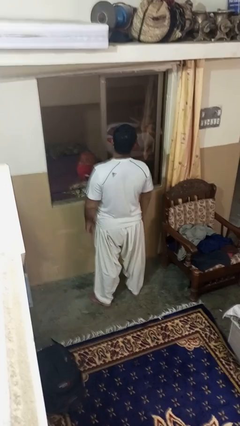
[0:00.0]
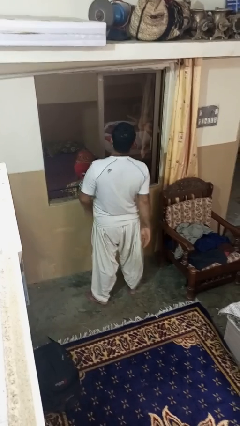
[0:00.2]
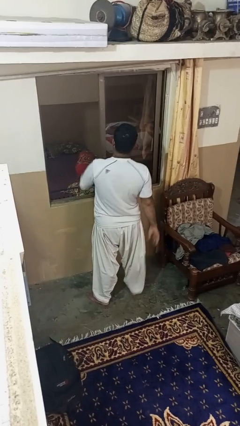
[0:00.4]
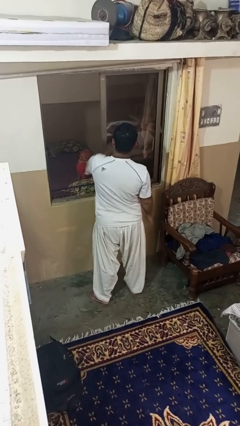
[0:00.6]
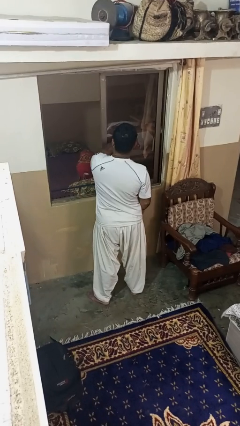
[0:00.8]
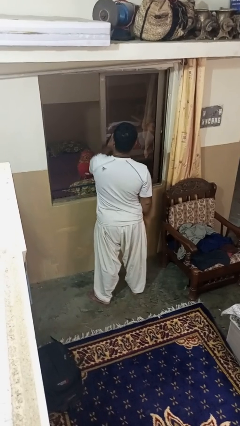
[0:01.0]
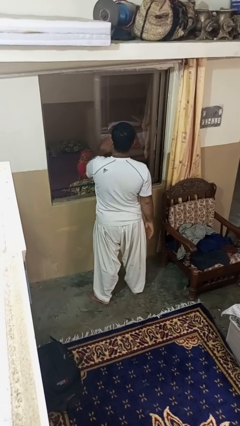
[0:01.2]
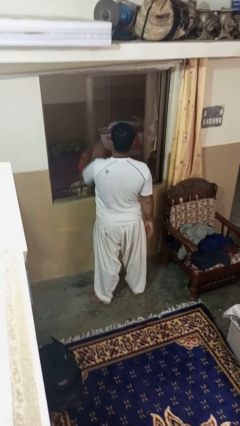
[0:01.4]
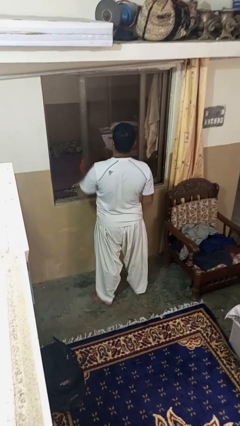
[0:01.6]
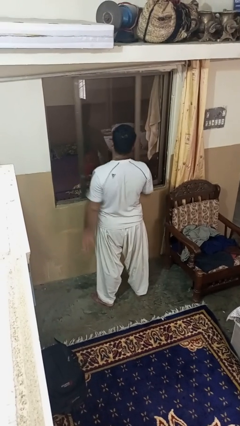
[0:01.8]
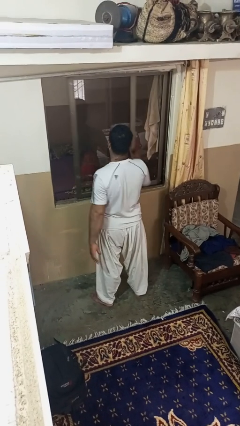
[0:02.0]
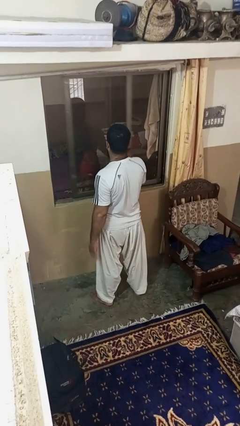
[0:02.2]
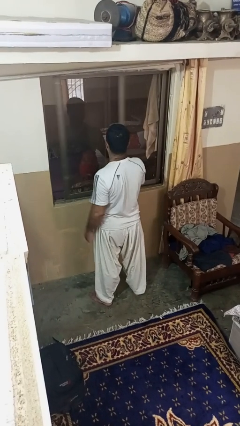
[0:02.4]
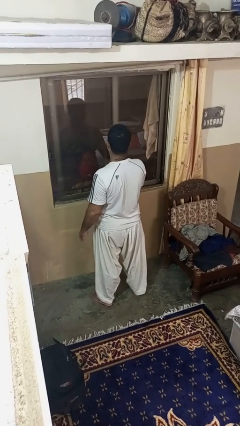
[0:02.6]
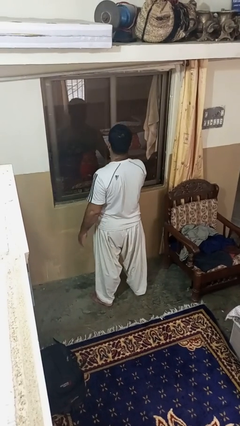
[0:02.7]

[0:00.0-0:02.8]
person closes home window

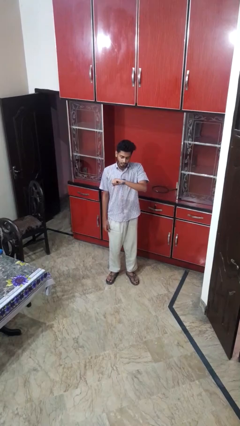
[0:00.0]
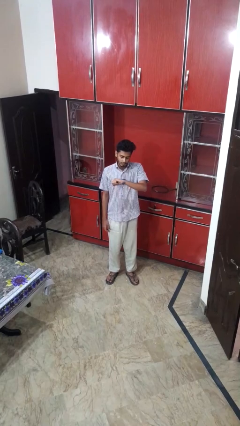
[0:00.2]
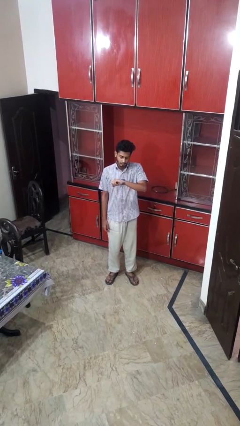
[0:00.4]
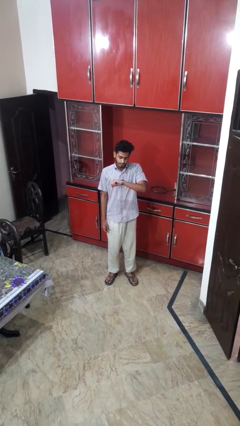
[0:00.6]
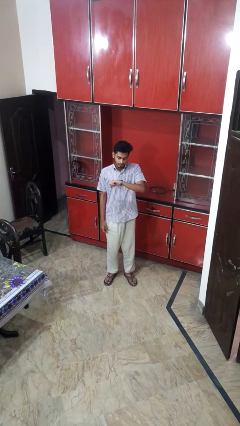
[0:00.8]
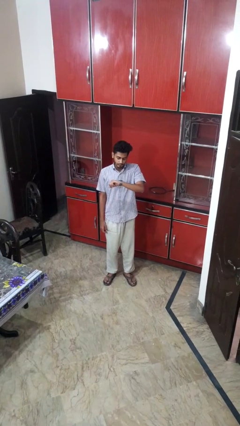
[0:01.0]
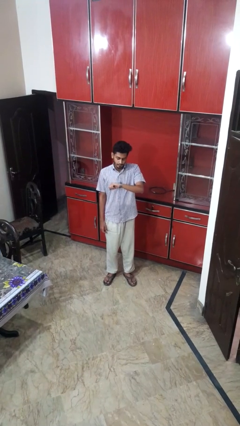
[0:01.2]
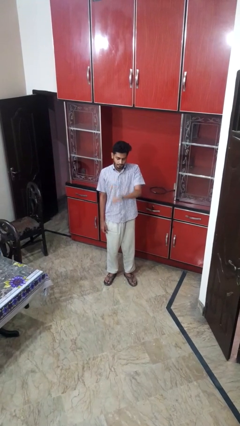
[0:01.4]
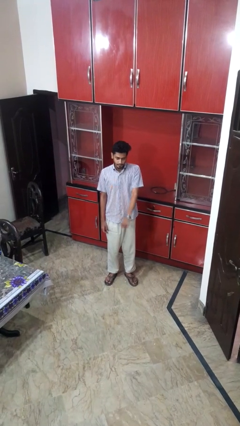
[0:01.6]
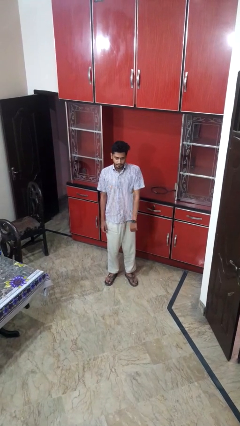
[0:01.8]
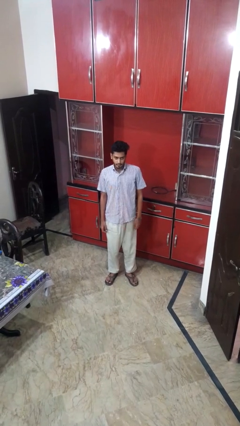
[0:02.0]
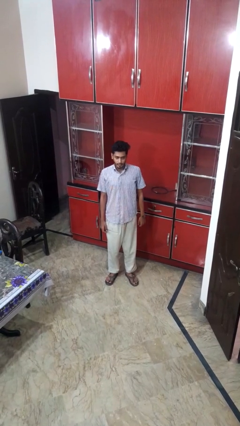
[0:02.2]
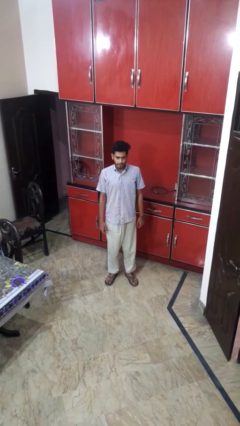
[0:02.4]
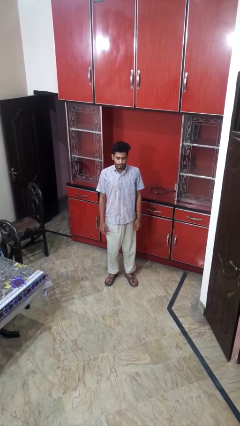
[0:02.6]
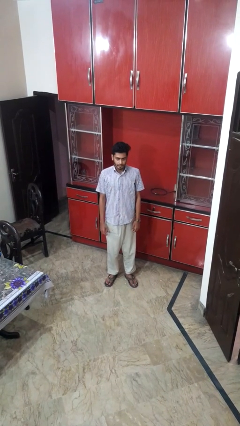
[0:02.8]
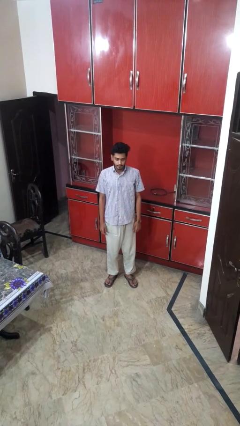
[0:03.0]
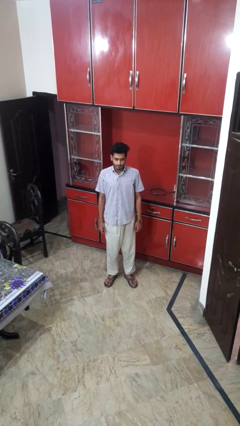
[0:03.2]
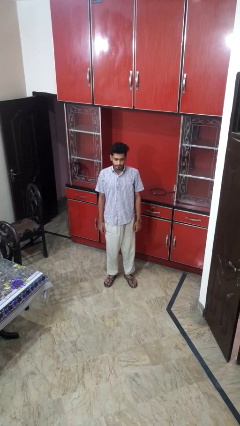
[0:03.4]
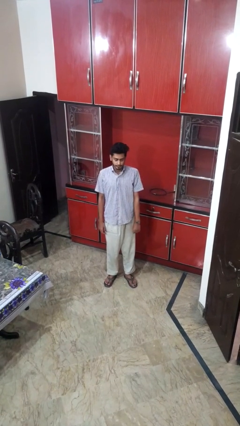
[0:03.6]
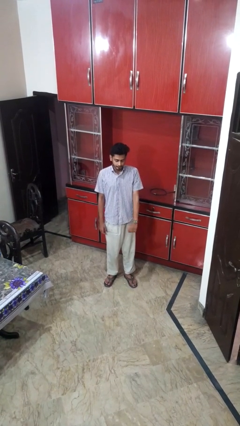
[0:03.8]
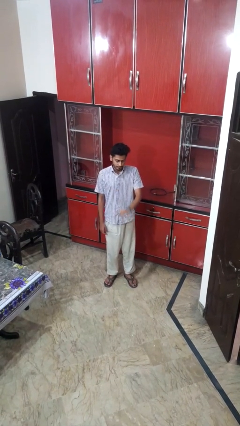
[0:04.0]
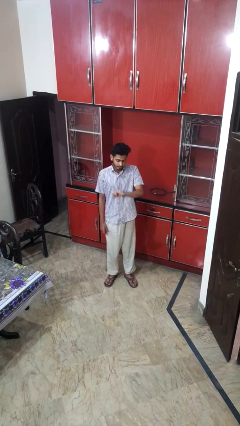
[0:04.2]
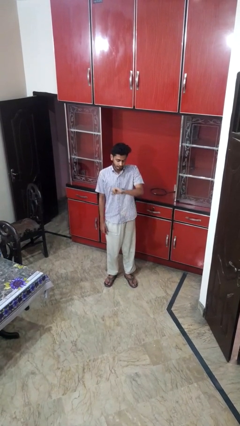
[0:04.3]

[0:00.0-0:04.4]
person sits crisscross

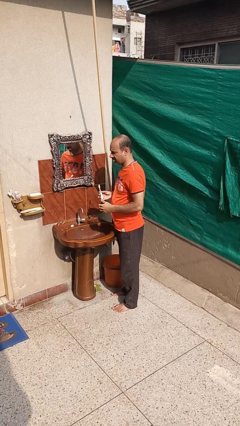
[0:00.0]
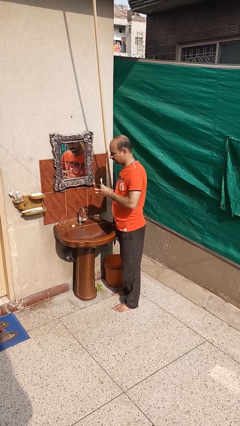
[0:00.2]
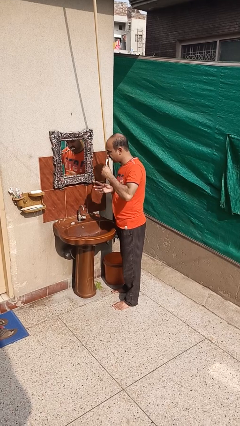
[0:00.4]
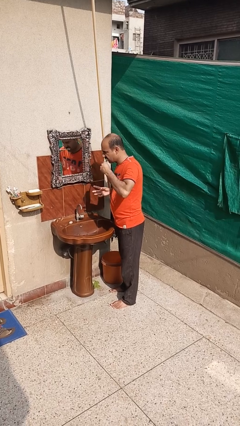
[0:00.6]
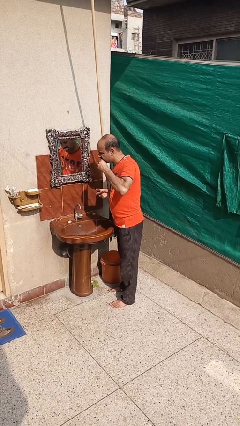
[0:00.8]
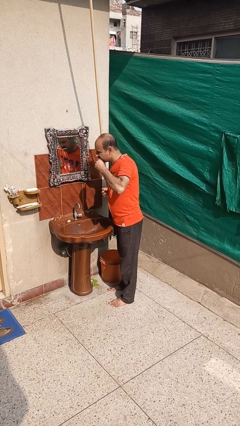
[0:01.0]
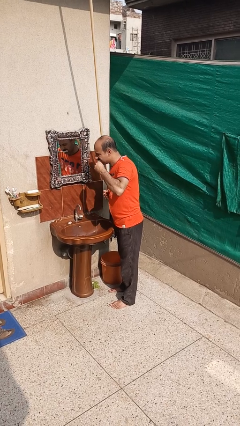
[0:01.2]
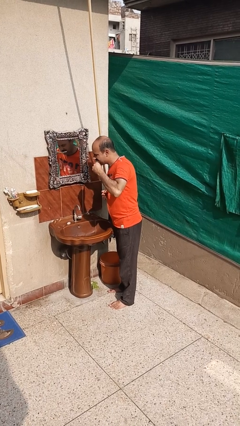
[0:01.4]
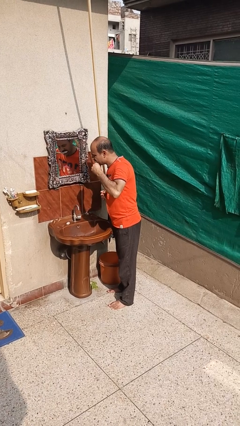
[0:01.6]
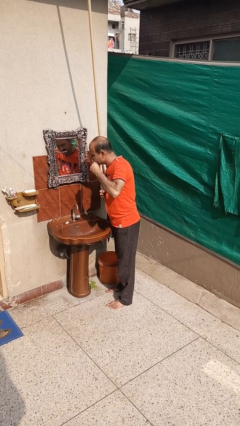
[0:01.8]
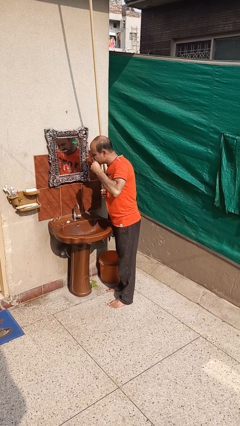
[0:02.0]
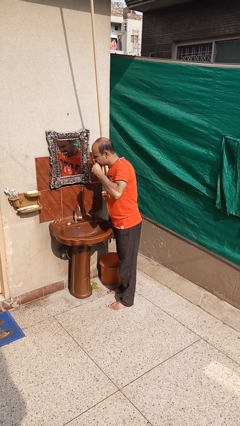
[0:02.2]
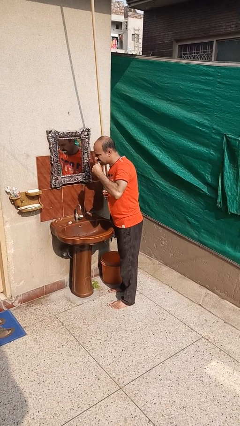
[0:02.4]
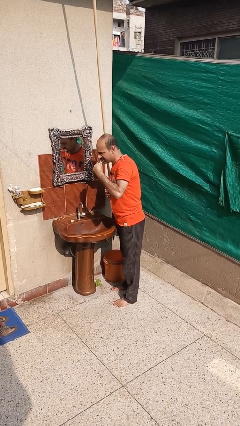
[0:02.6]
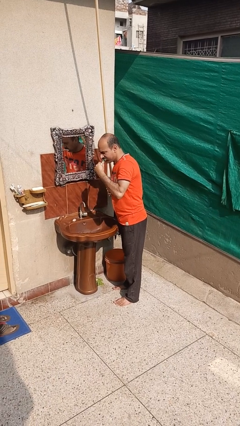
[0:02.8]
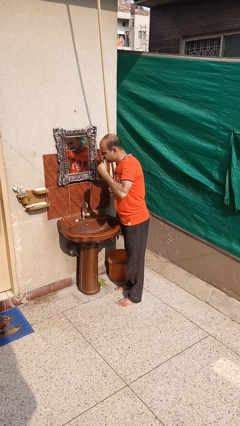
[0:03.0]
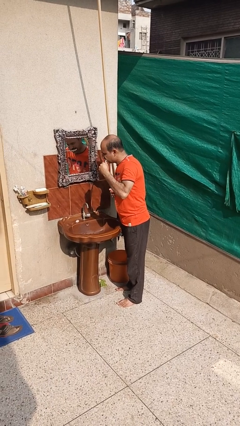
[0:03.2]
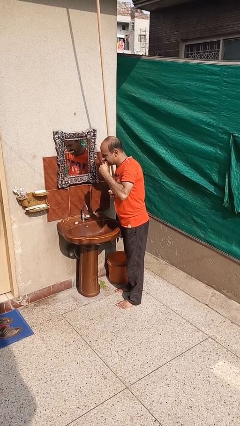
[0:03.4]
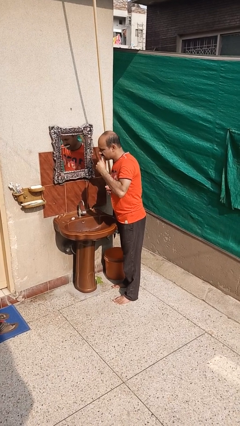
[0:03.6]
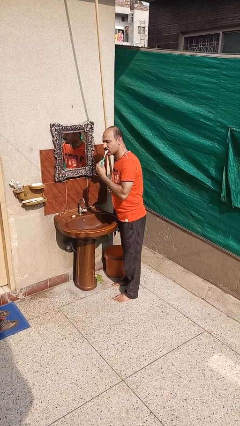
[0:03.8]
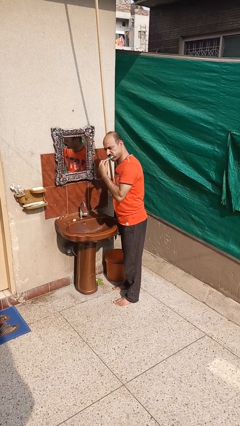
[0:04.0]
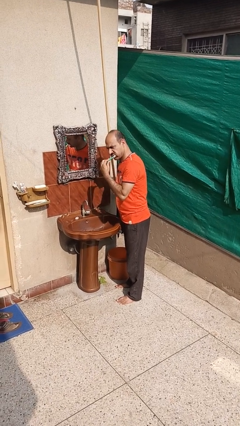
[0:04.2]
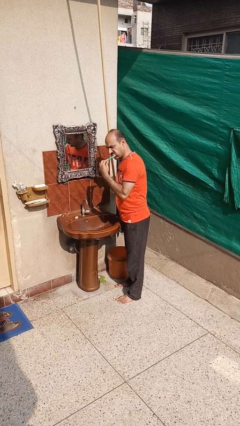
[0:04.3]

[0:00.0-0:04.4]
person brushes teeth

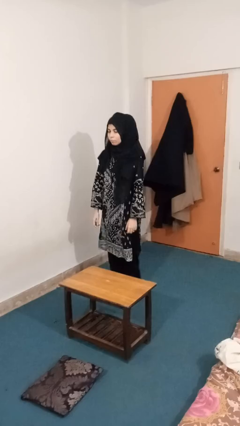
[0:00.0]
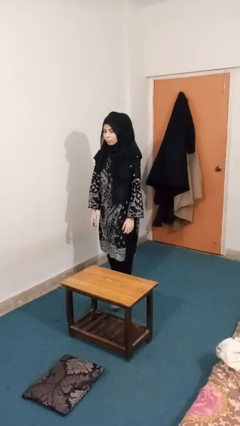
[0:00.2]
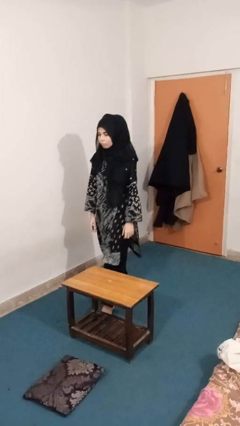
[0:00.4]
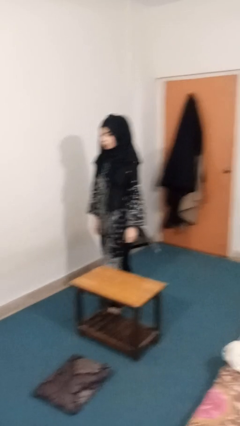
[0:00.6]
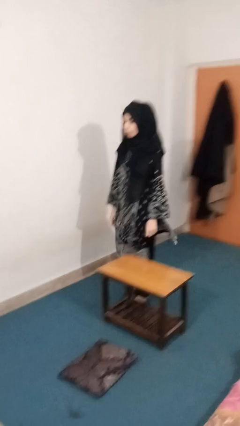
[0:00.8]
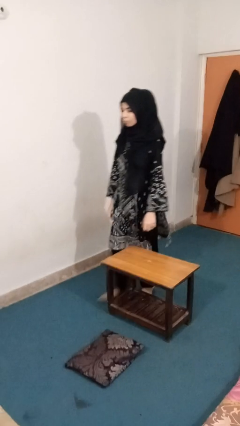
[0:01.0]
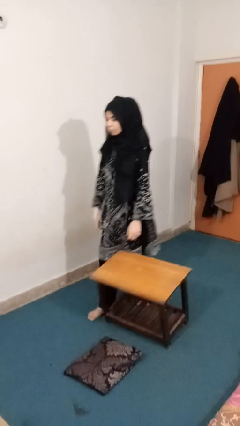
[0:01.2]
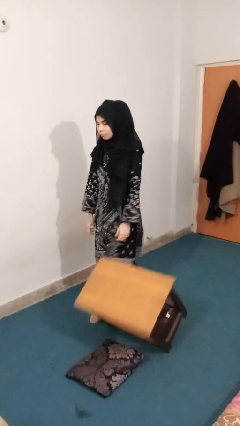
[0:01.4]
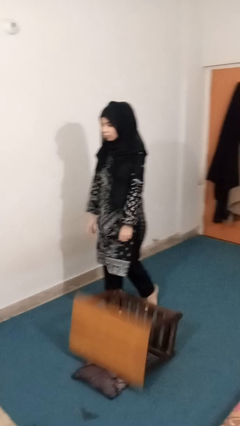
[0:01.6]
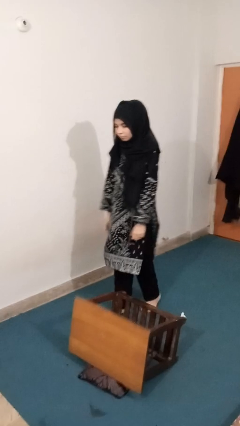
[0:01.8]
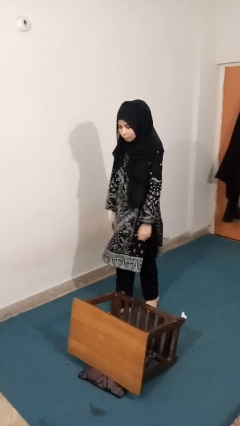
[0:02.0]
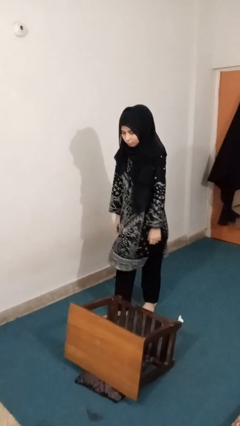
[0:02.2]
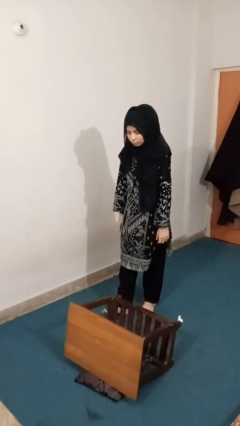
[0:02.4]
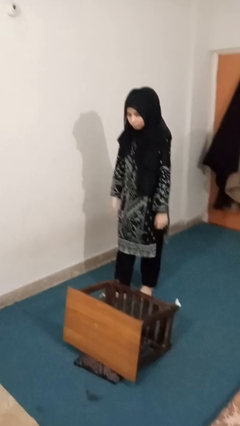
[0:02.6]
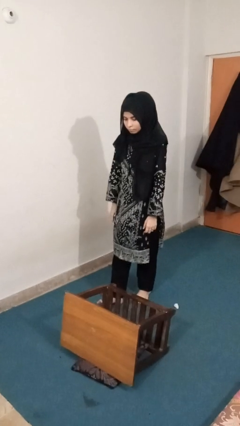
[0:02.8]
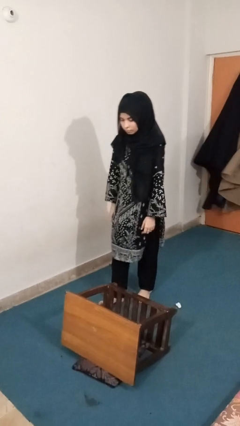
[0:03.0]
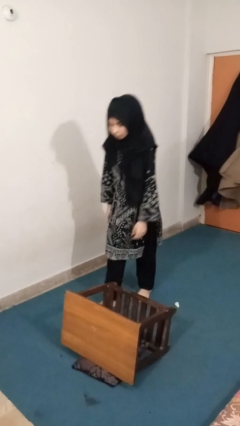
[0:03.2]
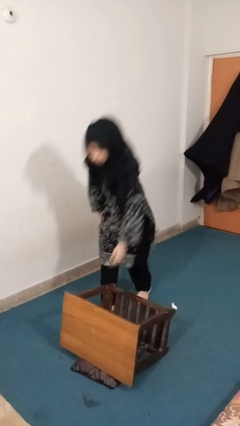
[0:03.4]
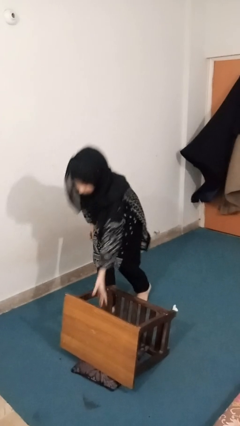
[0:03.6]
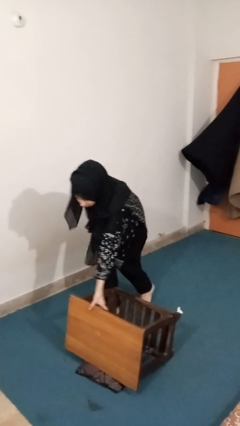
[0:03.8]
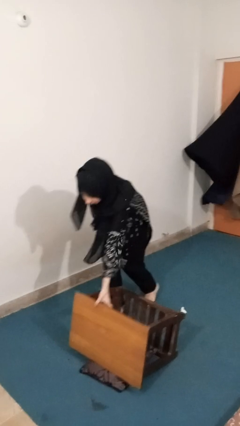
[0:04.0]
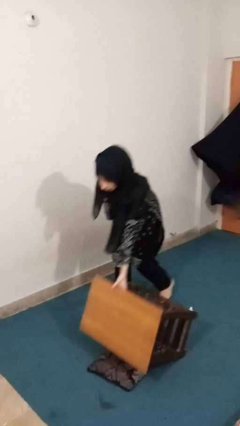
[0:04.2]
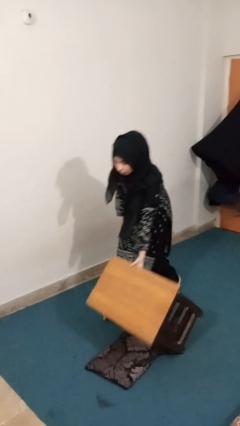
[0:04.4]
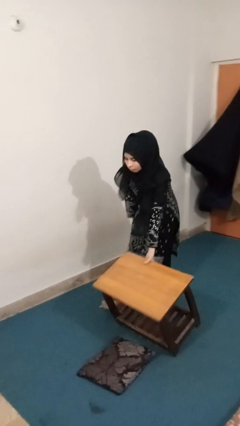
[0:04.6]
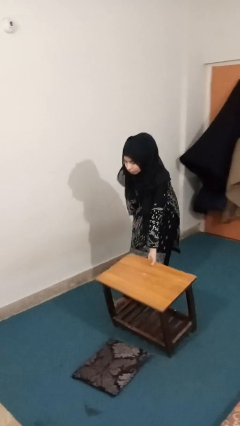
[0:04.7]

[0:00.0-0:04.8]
person knocks over furniture

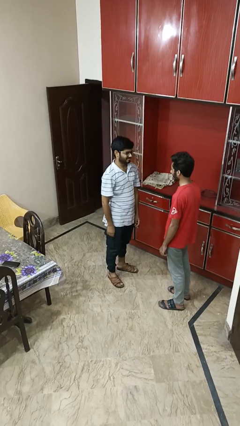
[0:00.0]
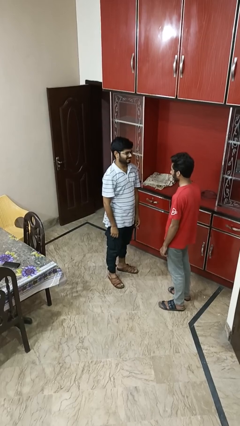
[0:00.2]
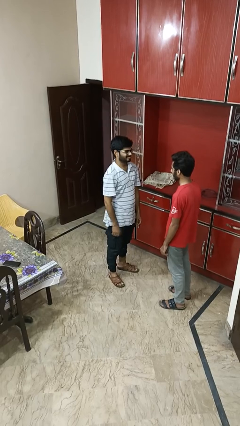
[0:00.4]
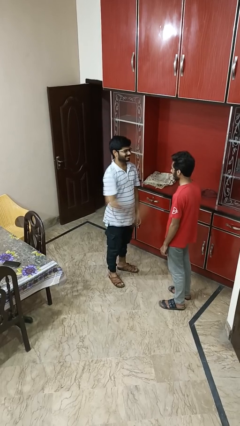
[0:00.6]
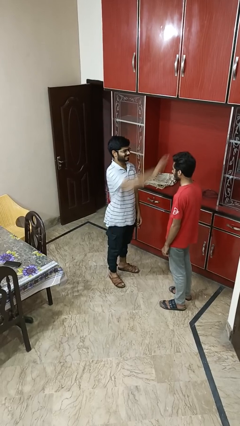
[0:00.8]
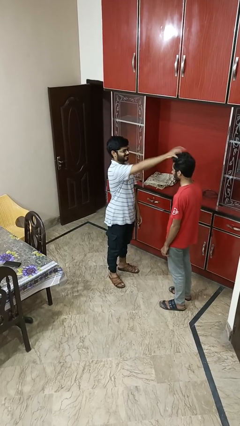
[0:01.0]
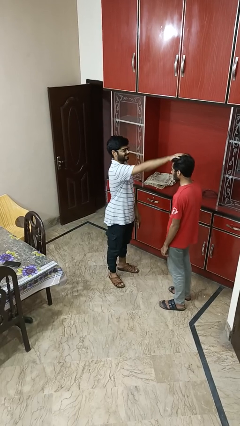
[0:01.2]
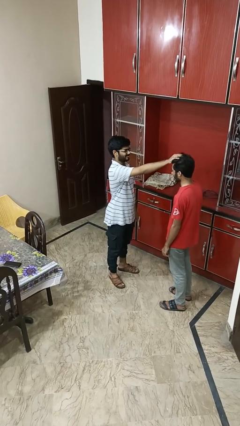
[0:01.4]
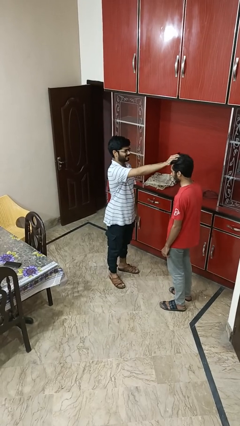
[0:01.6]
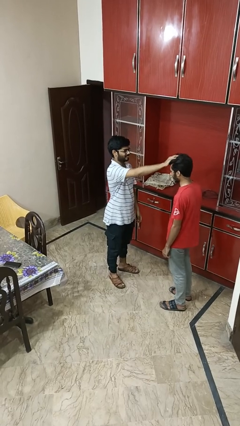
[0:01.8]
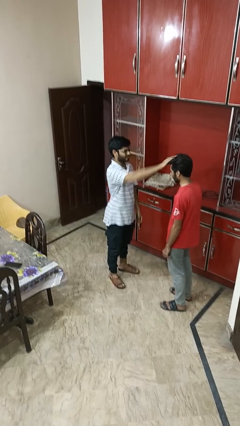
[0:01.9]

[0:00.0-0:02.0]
person grabs person by hair
